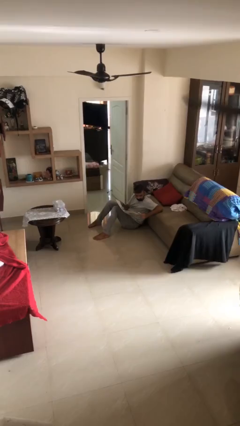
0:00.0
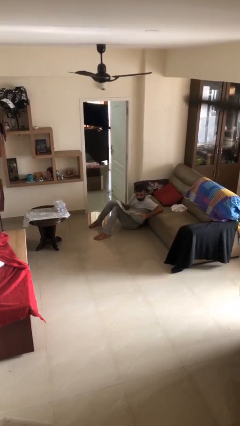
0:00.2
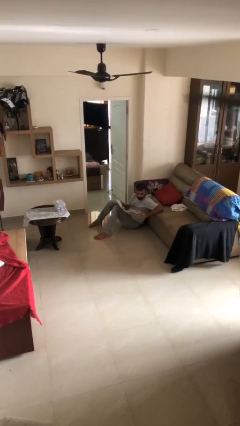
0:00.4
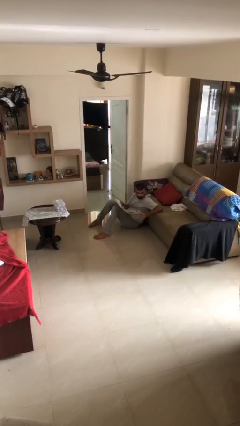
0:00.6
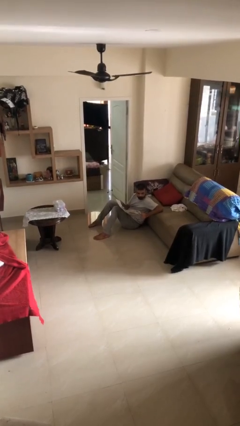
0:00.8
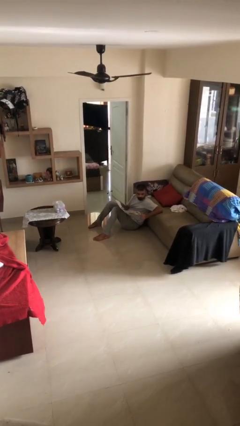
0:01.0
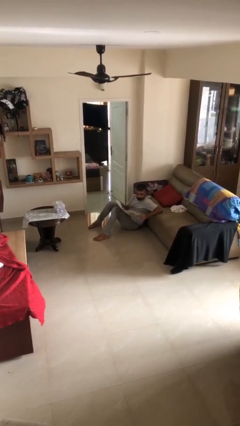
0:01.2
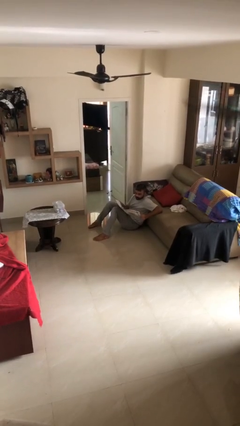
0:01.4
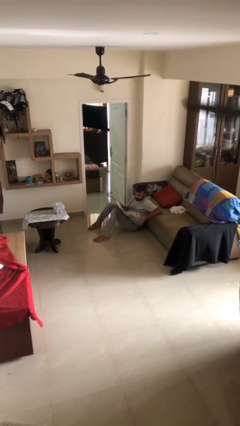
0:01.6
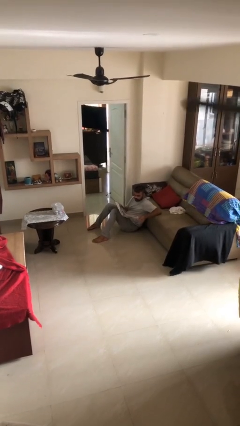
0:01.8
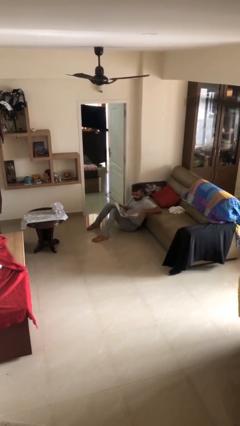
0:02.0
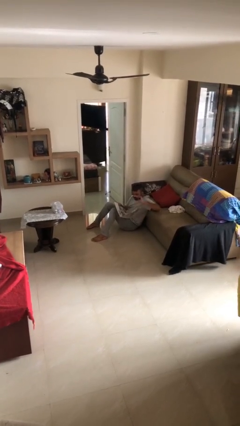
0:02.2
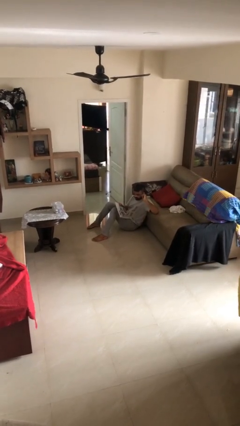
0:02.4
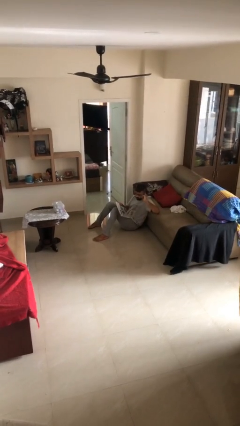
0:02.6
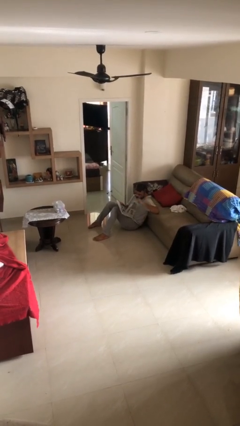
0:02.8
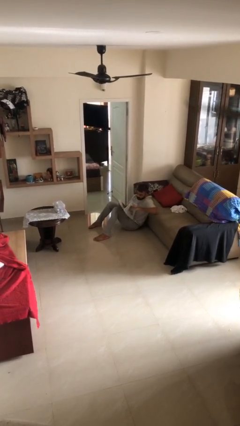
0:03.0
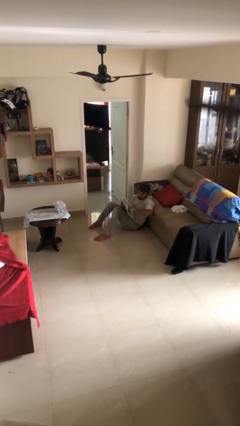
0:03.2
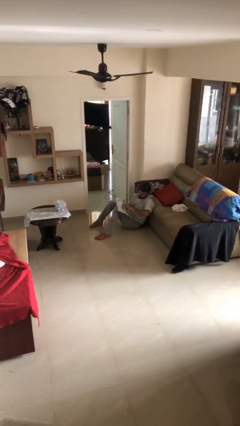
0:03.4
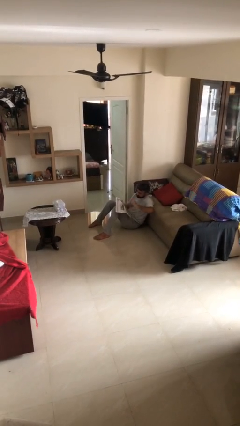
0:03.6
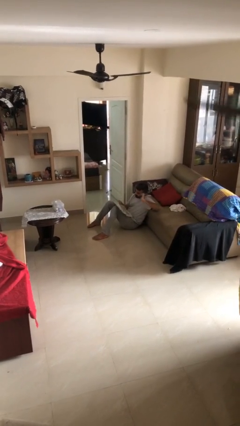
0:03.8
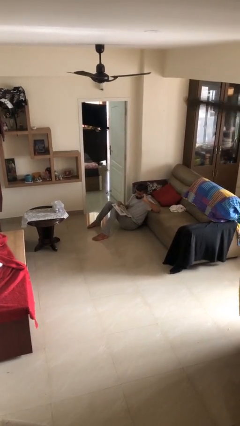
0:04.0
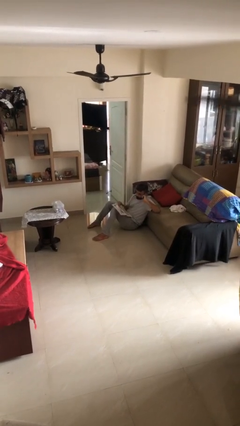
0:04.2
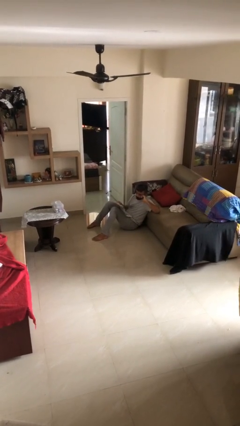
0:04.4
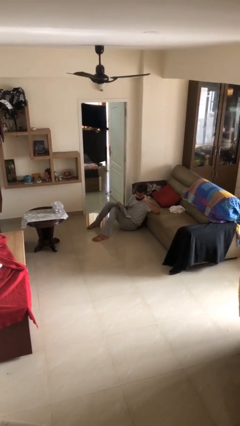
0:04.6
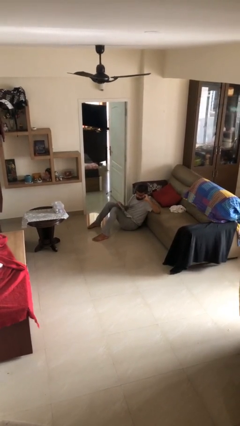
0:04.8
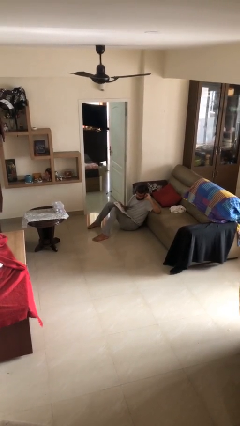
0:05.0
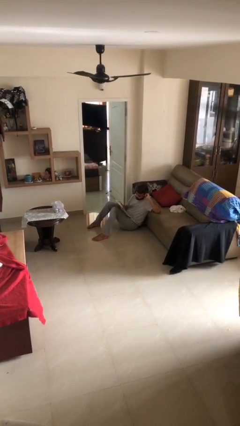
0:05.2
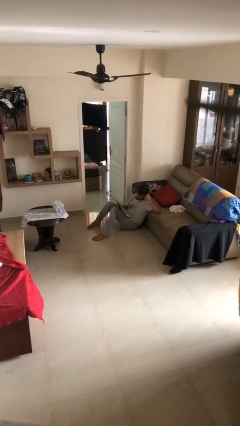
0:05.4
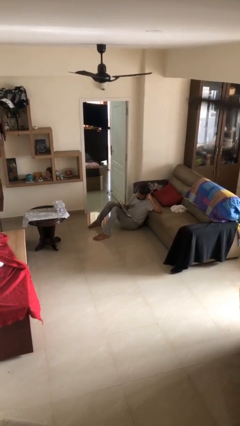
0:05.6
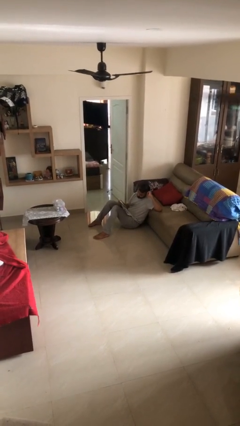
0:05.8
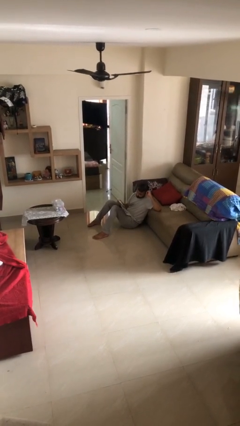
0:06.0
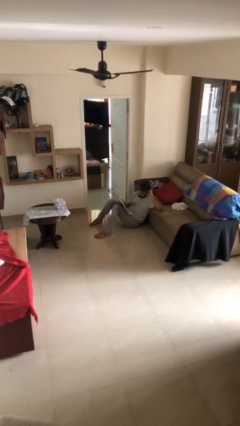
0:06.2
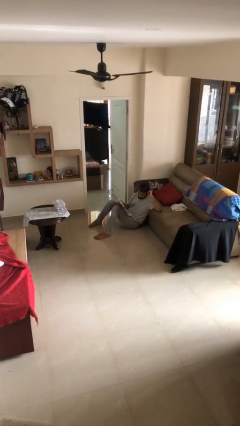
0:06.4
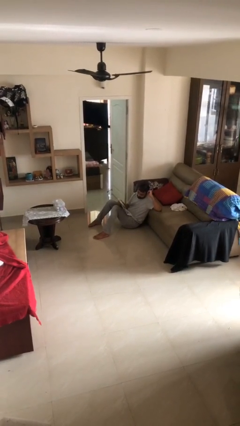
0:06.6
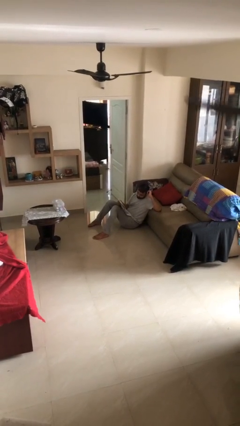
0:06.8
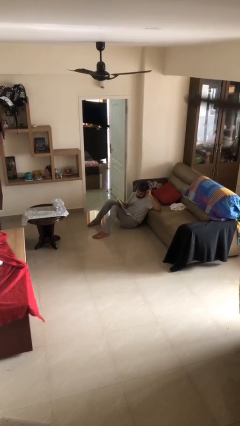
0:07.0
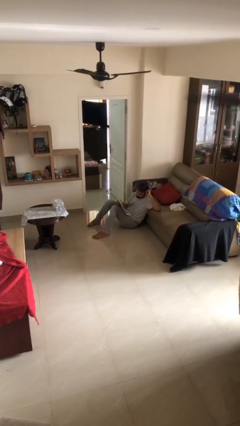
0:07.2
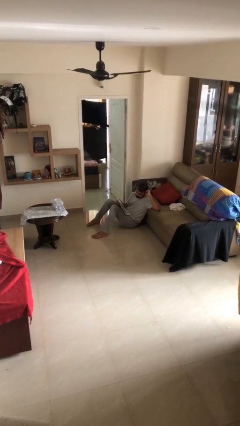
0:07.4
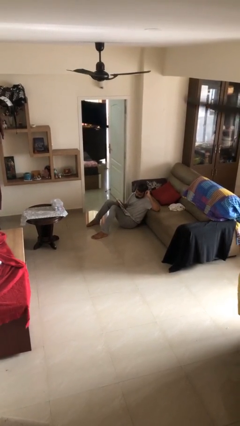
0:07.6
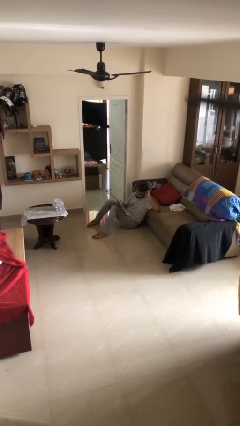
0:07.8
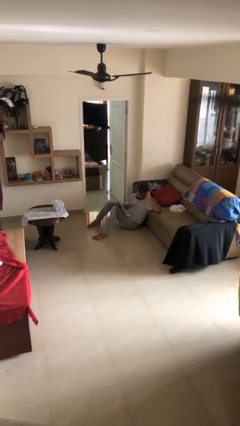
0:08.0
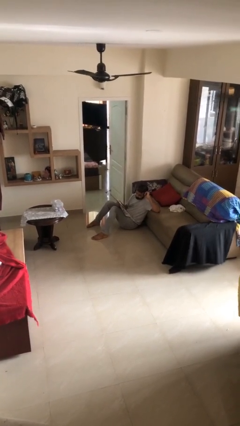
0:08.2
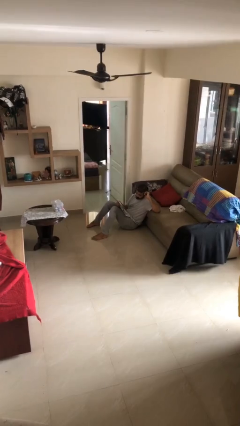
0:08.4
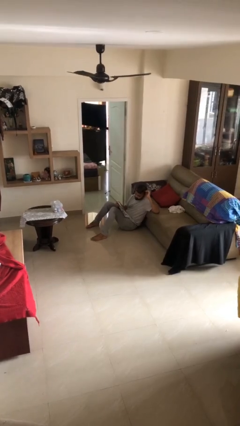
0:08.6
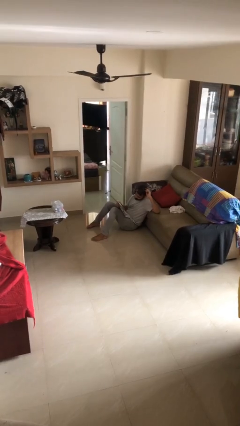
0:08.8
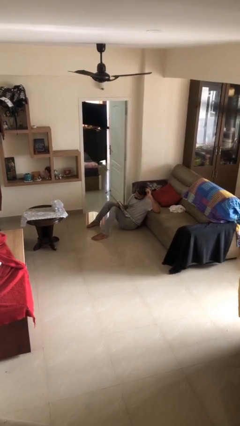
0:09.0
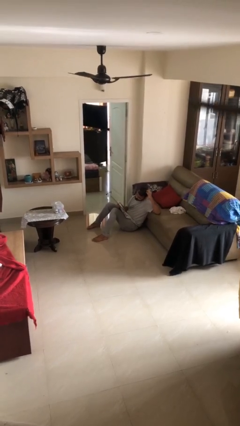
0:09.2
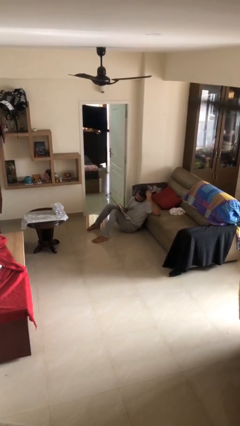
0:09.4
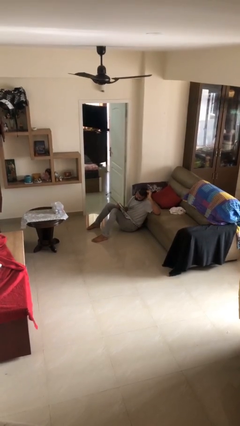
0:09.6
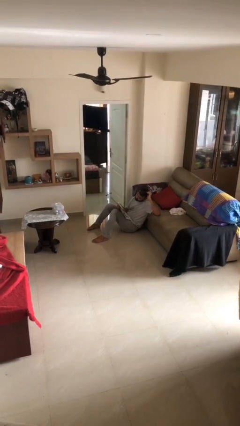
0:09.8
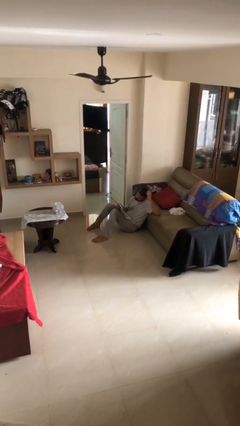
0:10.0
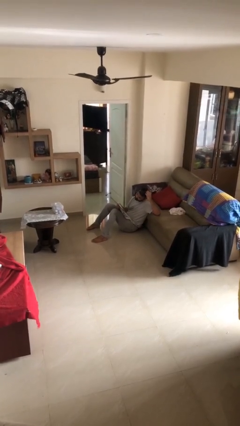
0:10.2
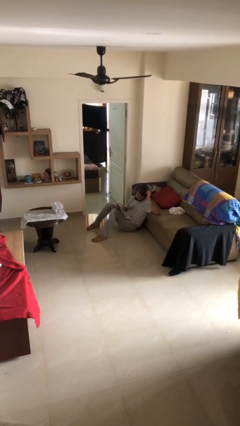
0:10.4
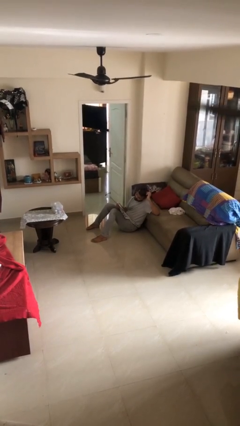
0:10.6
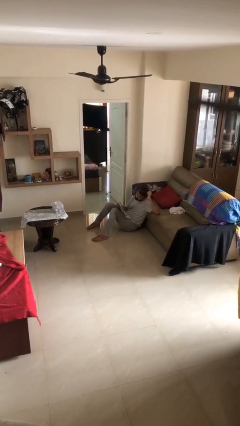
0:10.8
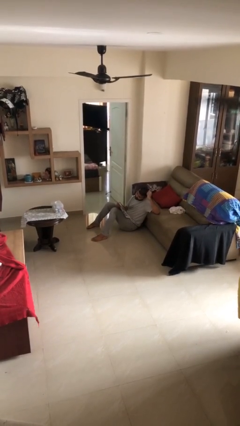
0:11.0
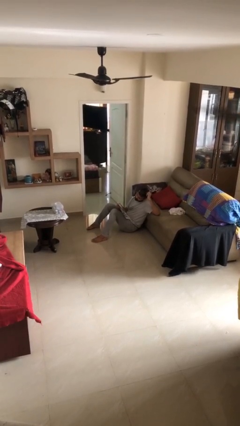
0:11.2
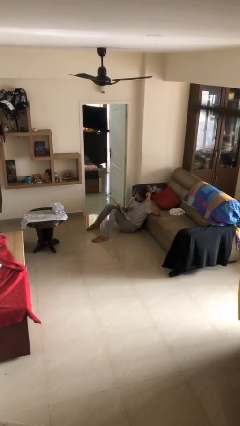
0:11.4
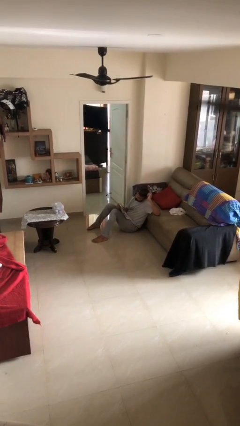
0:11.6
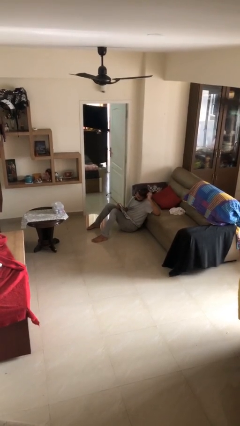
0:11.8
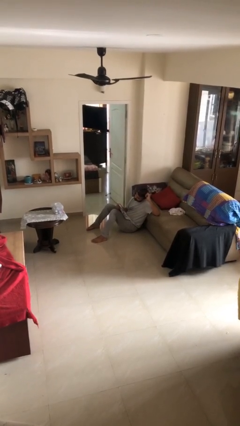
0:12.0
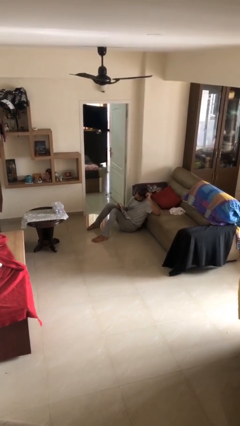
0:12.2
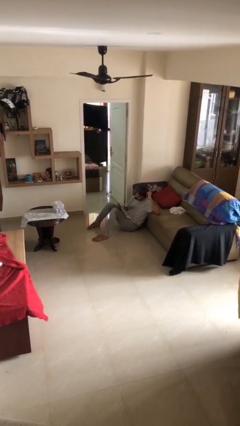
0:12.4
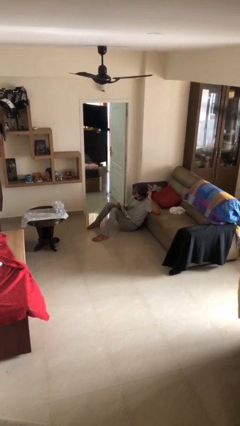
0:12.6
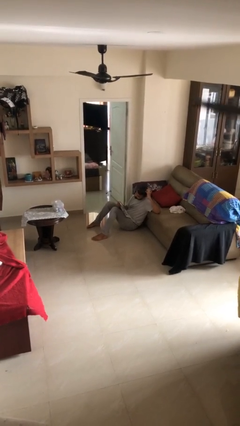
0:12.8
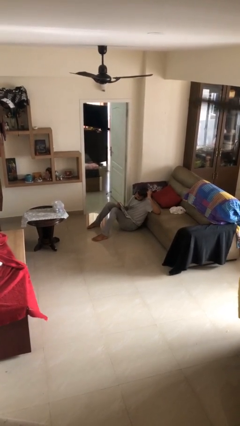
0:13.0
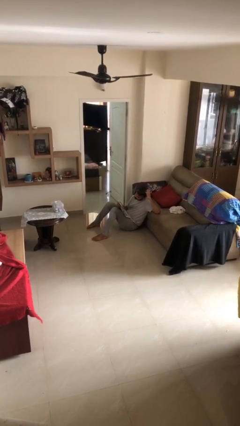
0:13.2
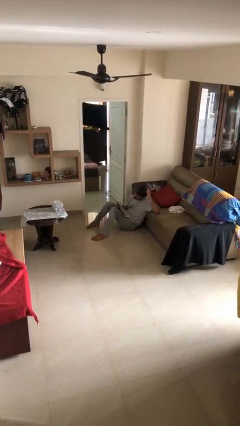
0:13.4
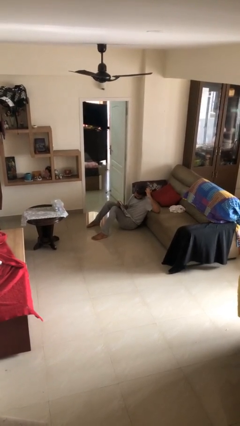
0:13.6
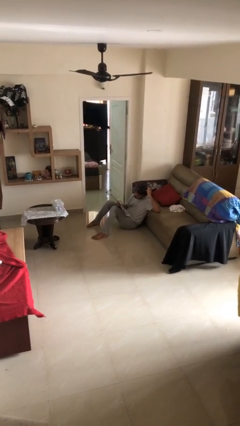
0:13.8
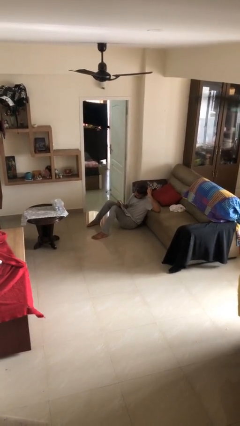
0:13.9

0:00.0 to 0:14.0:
person reads document

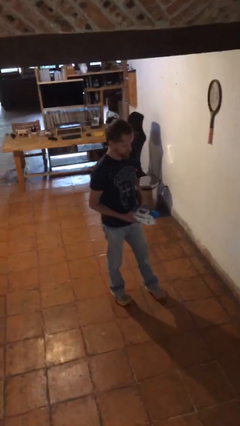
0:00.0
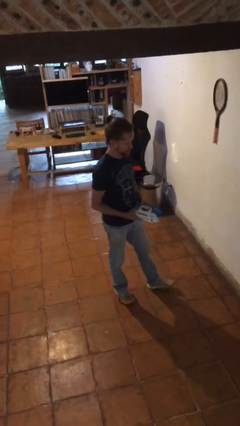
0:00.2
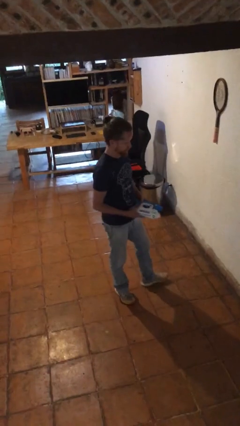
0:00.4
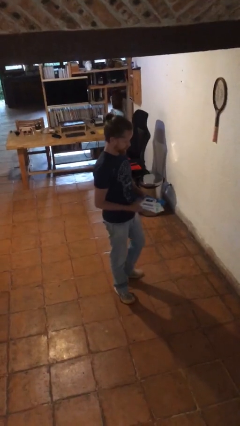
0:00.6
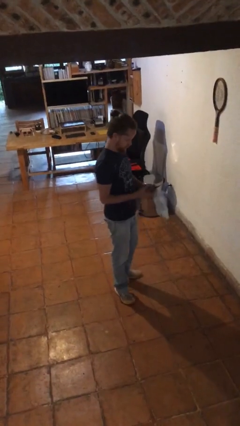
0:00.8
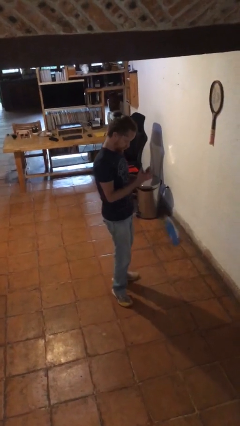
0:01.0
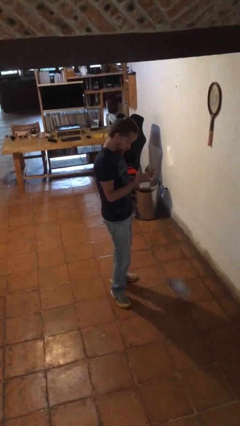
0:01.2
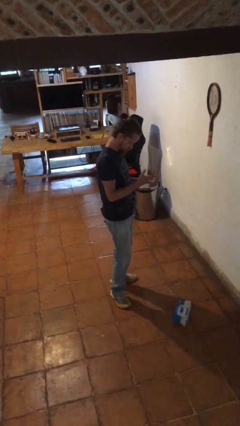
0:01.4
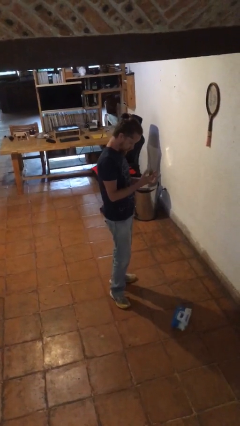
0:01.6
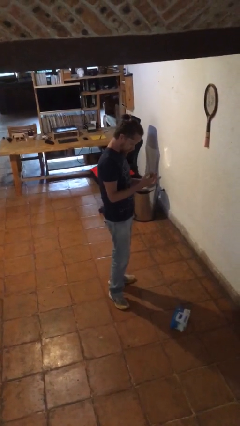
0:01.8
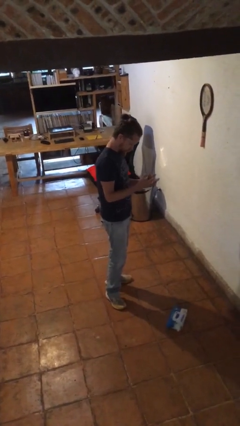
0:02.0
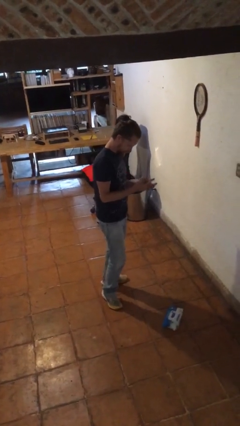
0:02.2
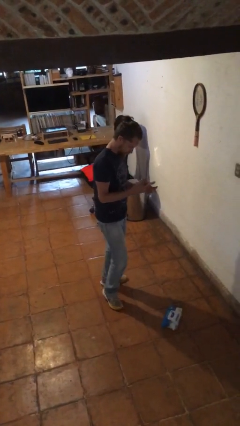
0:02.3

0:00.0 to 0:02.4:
person drops object

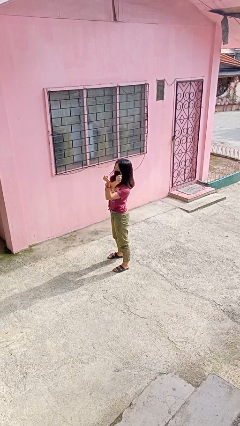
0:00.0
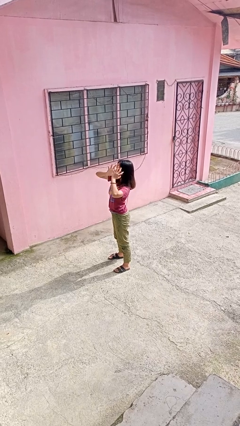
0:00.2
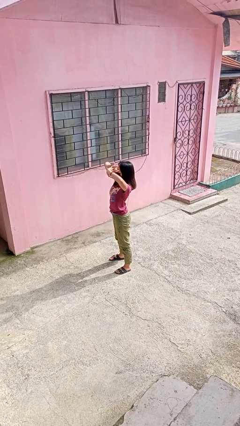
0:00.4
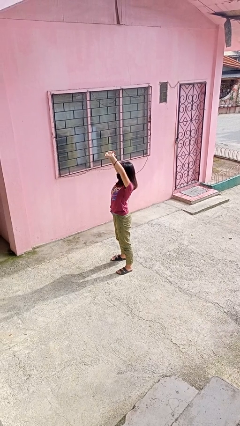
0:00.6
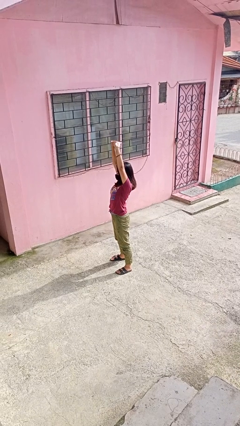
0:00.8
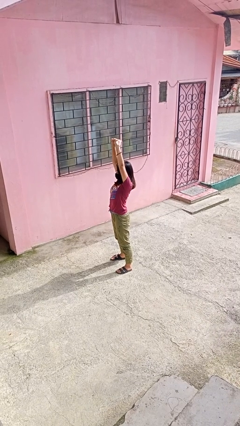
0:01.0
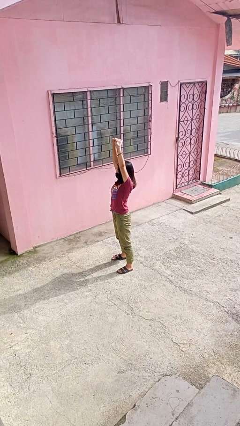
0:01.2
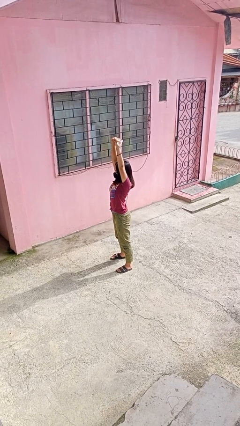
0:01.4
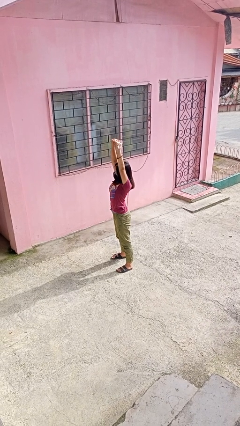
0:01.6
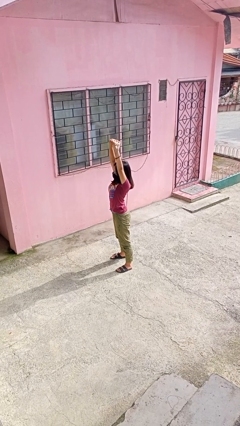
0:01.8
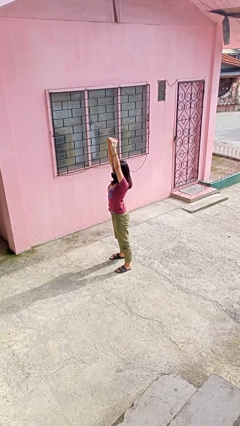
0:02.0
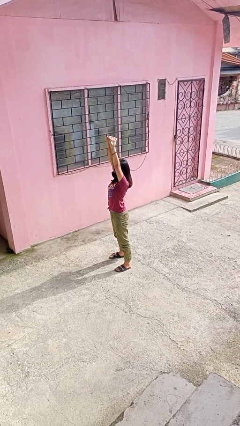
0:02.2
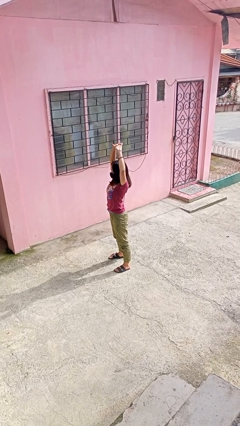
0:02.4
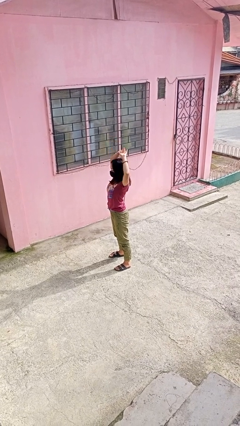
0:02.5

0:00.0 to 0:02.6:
person stretches arms over head
